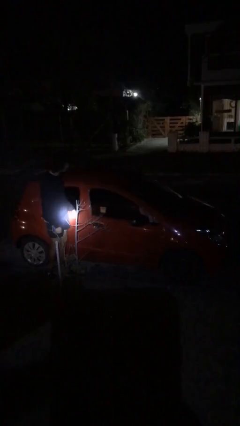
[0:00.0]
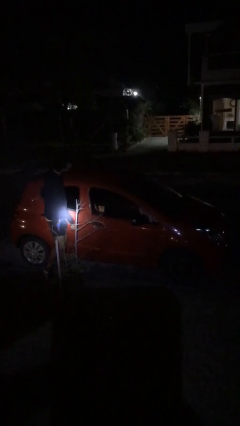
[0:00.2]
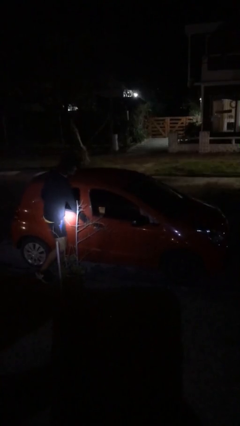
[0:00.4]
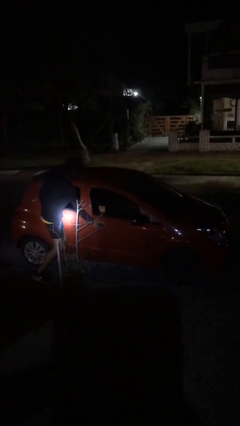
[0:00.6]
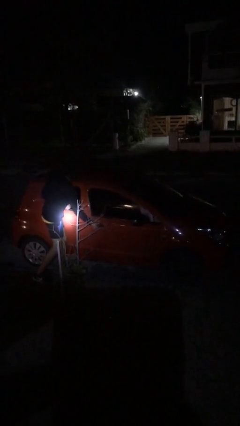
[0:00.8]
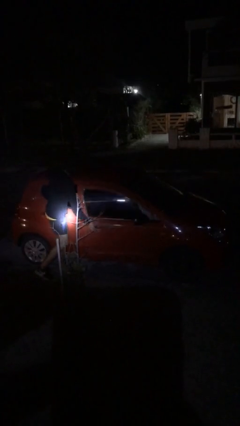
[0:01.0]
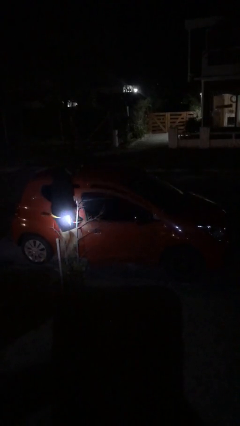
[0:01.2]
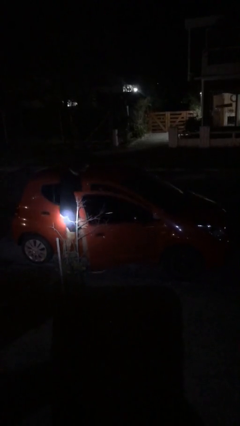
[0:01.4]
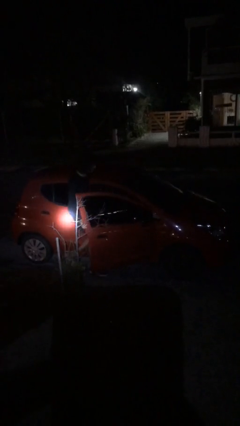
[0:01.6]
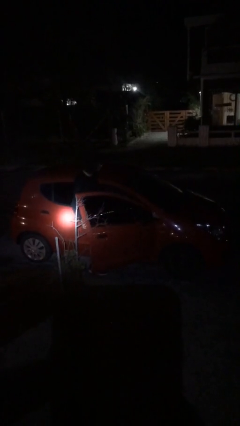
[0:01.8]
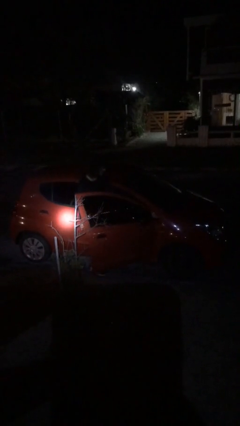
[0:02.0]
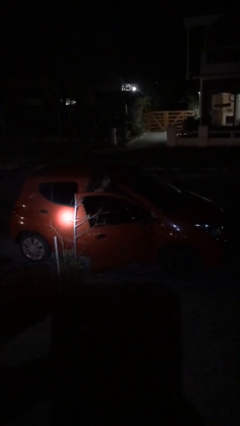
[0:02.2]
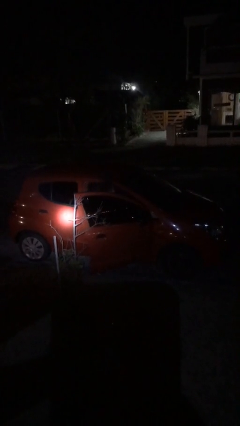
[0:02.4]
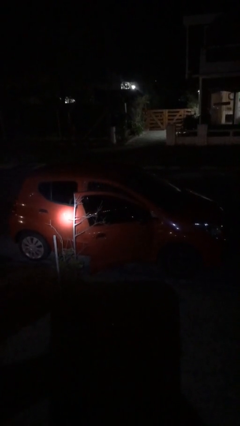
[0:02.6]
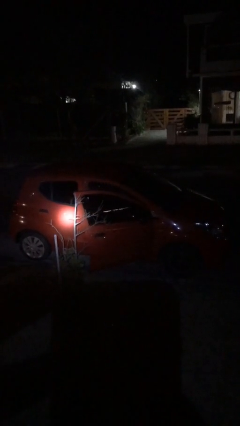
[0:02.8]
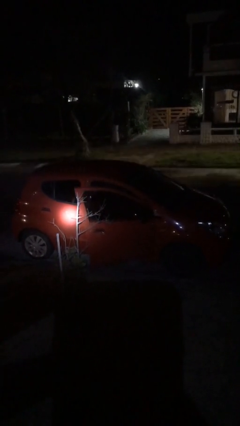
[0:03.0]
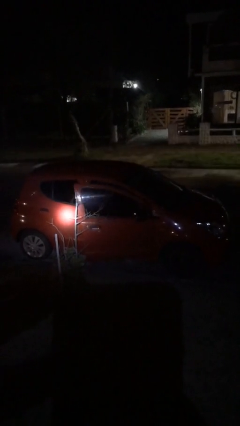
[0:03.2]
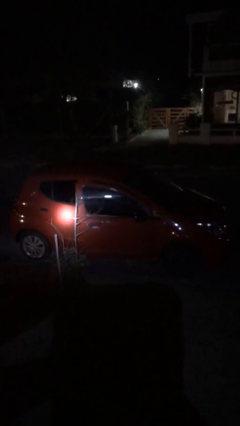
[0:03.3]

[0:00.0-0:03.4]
car picks up person

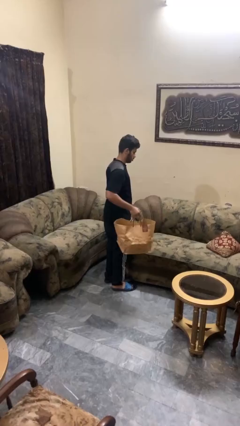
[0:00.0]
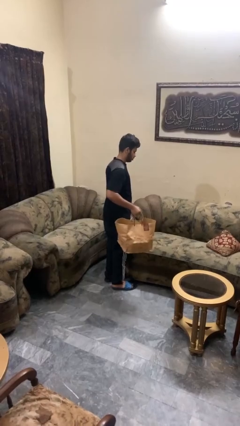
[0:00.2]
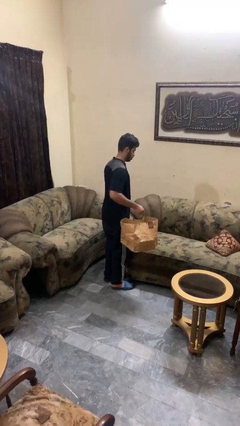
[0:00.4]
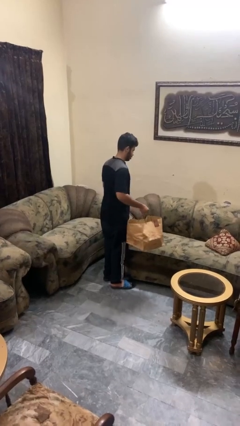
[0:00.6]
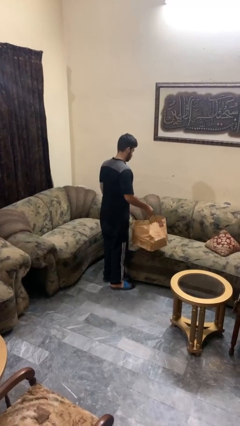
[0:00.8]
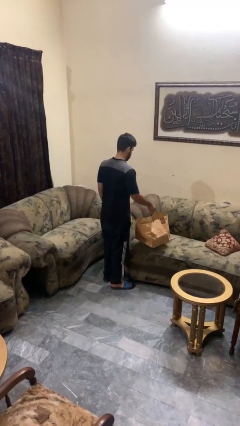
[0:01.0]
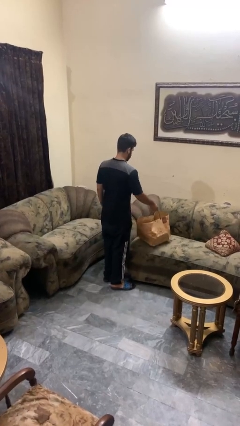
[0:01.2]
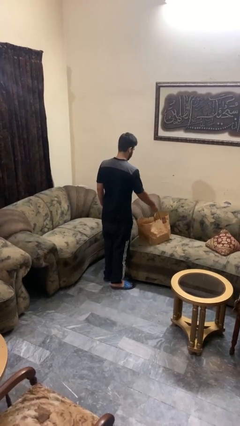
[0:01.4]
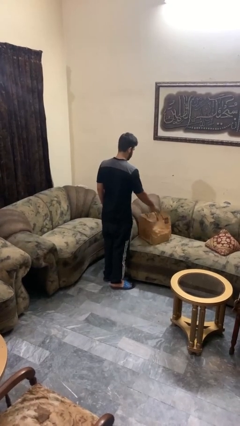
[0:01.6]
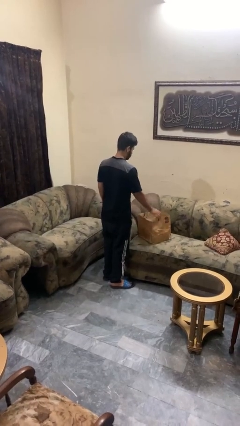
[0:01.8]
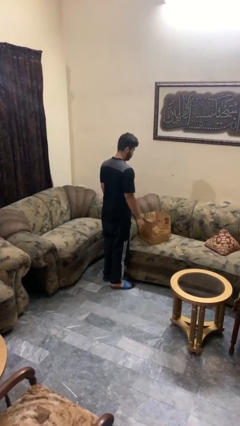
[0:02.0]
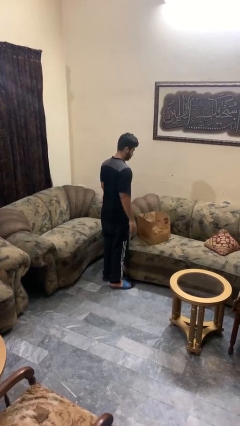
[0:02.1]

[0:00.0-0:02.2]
person puts down object on couch

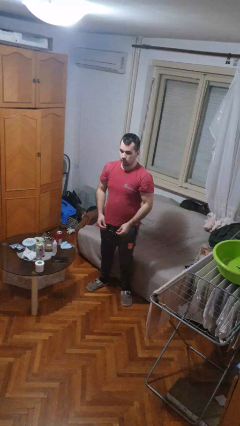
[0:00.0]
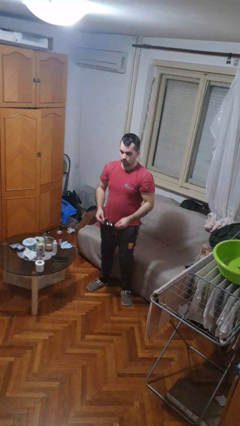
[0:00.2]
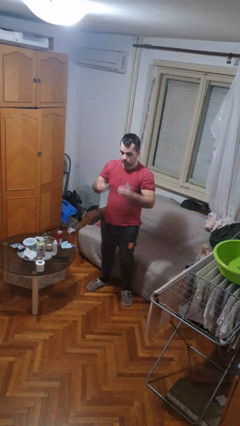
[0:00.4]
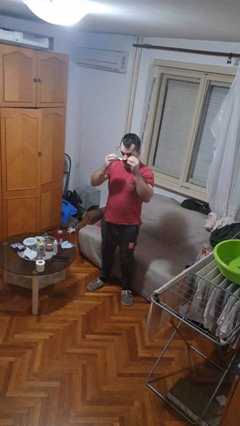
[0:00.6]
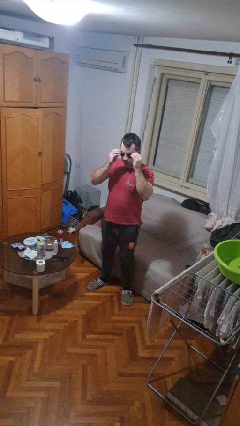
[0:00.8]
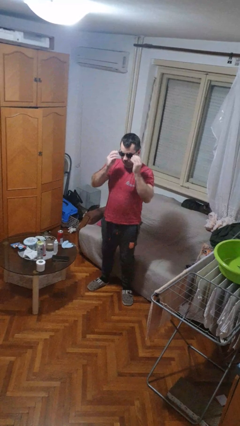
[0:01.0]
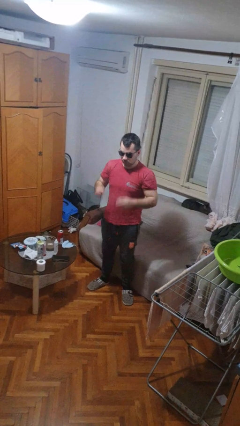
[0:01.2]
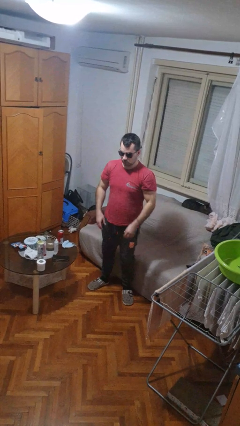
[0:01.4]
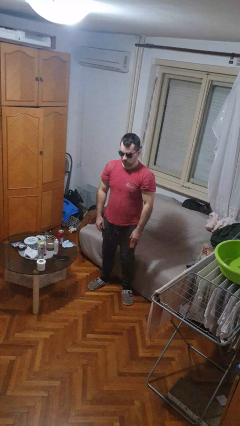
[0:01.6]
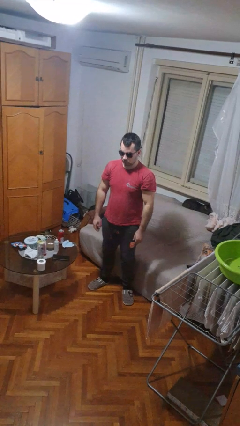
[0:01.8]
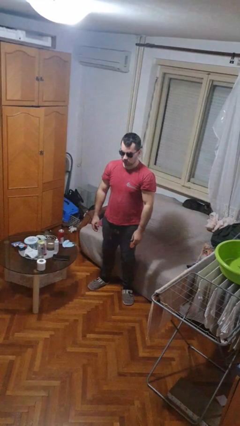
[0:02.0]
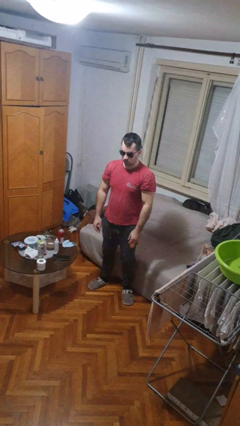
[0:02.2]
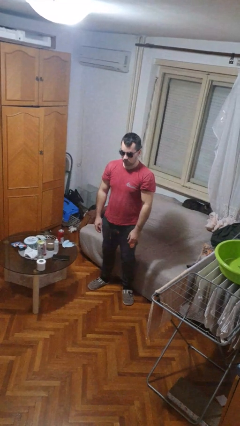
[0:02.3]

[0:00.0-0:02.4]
person puts on sunglasses

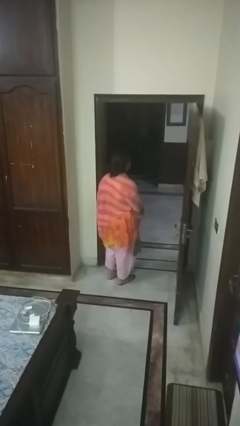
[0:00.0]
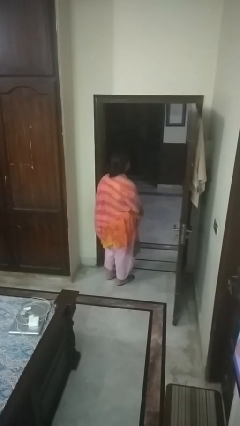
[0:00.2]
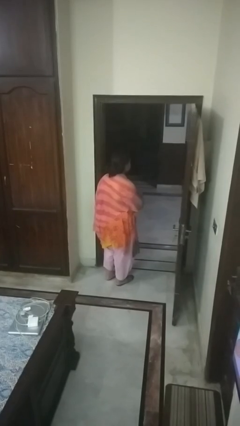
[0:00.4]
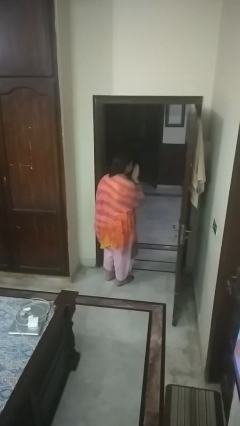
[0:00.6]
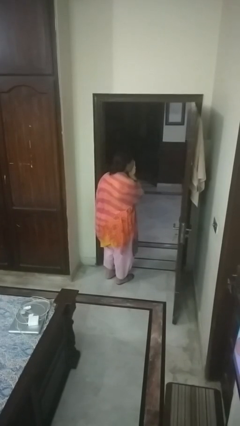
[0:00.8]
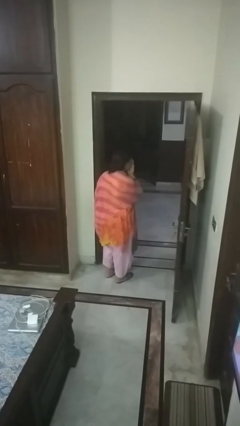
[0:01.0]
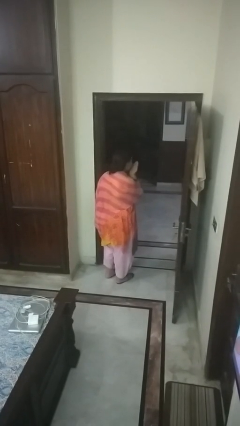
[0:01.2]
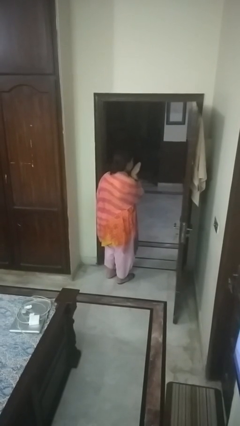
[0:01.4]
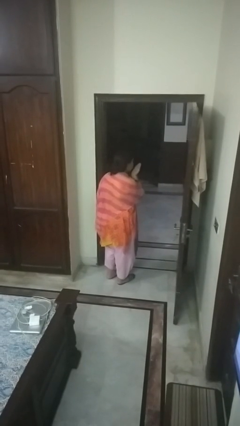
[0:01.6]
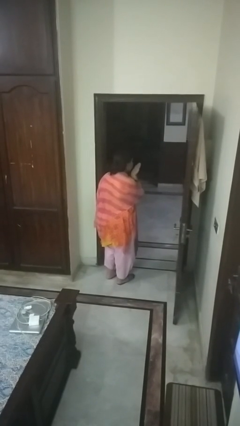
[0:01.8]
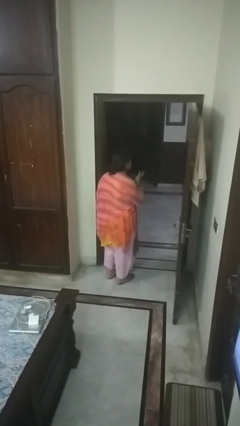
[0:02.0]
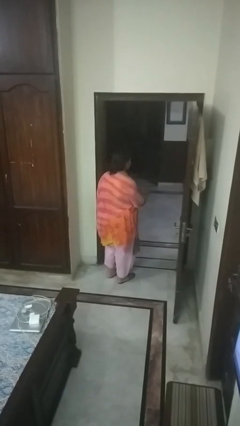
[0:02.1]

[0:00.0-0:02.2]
person gestures blow kiss

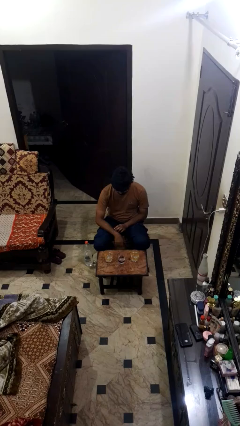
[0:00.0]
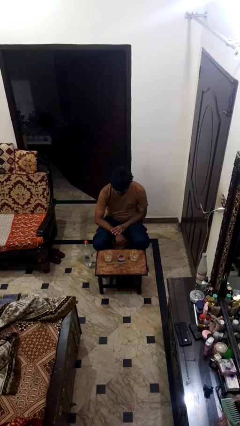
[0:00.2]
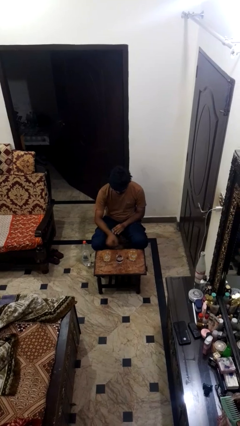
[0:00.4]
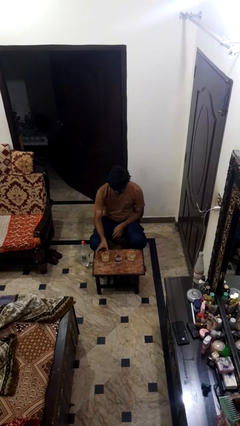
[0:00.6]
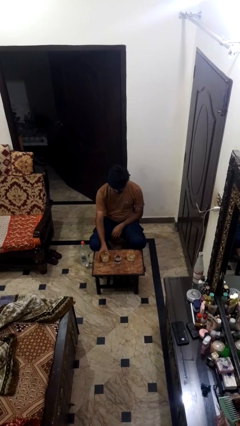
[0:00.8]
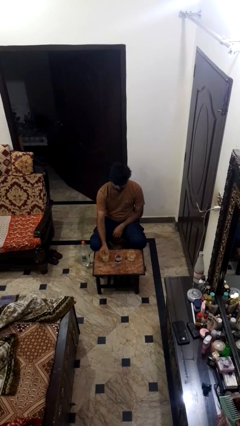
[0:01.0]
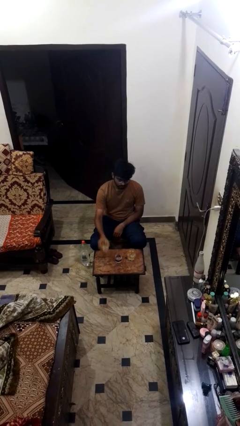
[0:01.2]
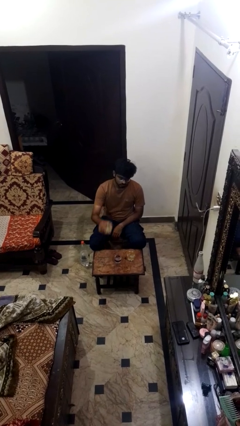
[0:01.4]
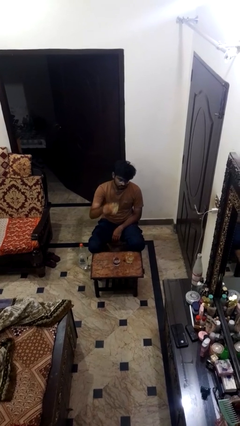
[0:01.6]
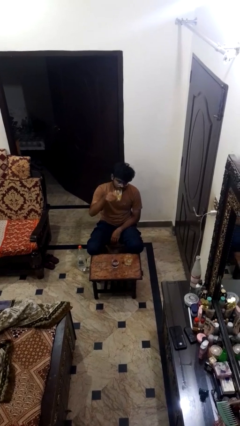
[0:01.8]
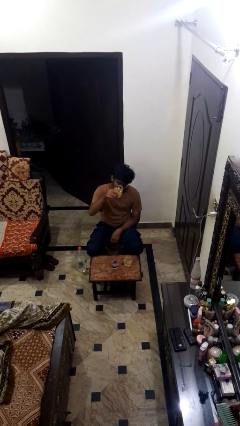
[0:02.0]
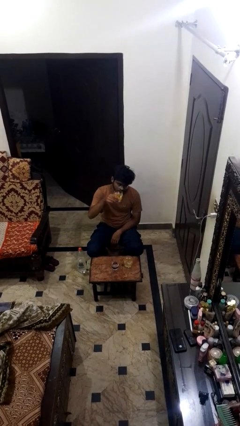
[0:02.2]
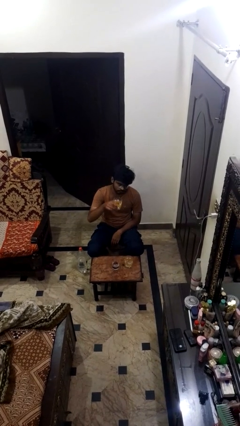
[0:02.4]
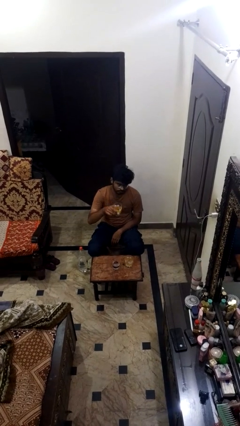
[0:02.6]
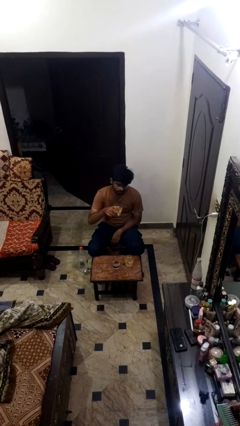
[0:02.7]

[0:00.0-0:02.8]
person picks up object from table

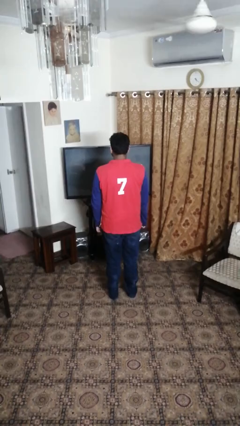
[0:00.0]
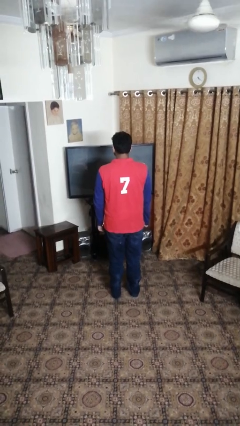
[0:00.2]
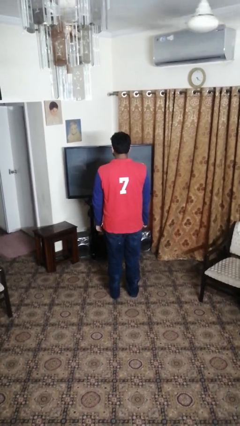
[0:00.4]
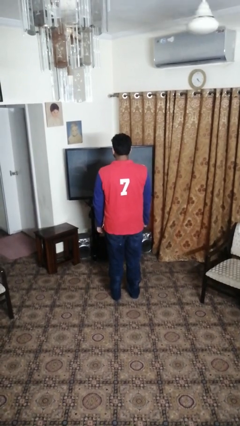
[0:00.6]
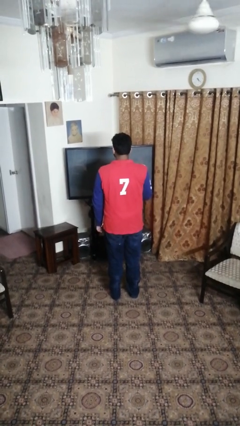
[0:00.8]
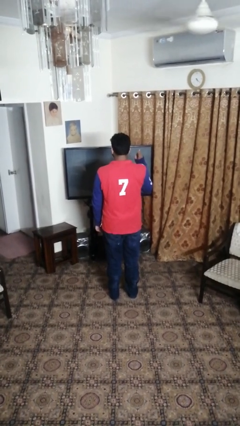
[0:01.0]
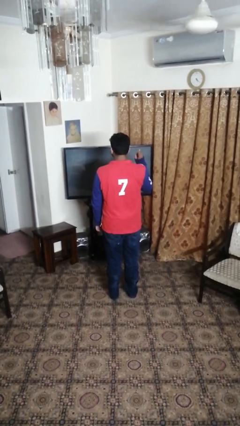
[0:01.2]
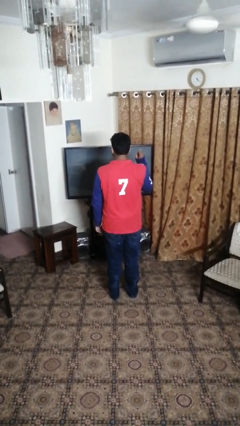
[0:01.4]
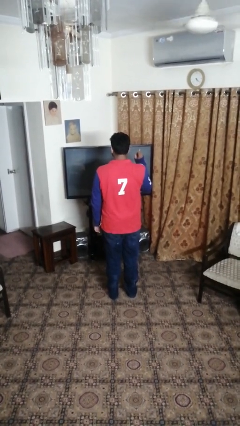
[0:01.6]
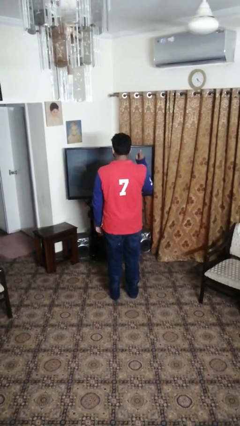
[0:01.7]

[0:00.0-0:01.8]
person gestures number one

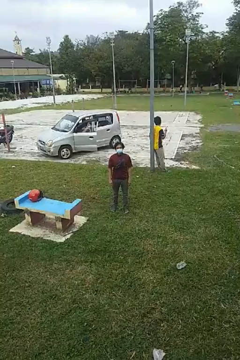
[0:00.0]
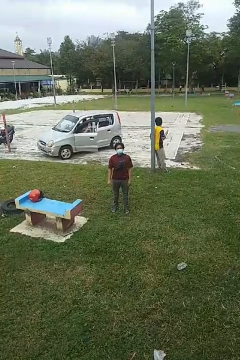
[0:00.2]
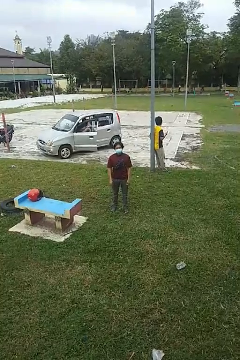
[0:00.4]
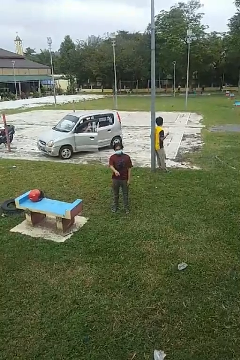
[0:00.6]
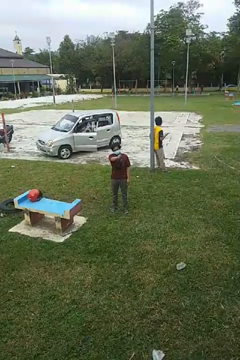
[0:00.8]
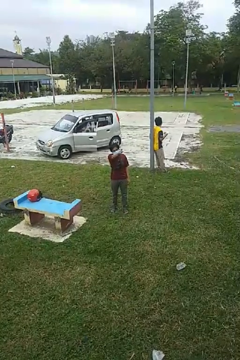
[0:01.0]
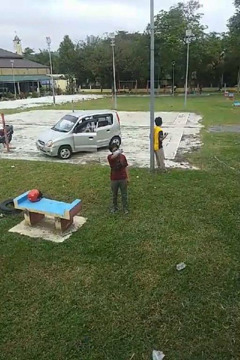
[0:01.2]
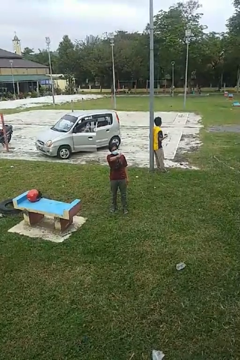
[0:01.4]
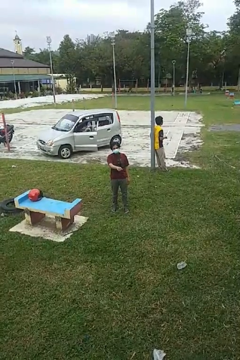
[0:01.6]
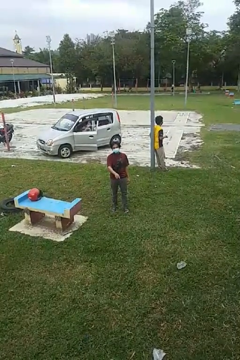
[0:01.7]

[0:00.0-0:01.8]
person points at person

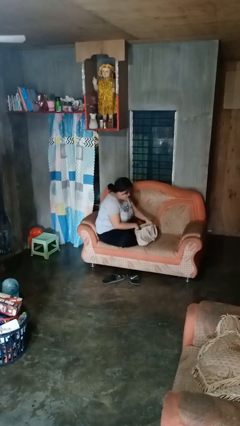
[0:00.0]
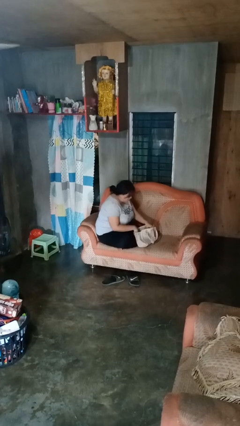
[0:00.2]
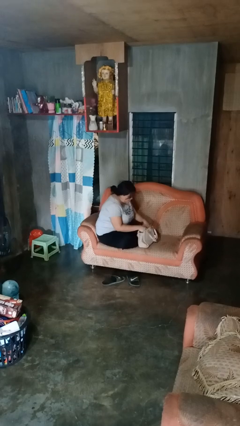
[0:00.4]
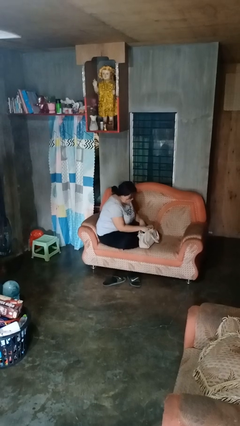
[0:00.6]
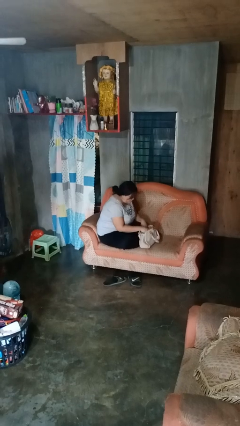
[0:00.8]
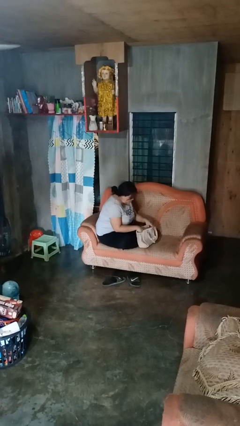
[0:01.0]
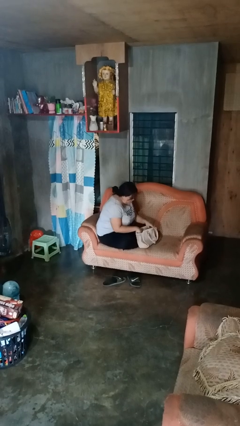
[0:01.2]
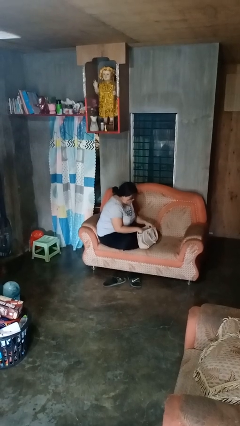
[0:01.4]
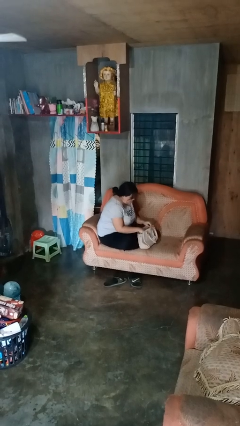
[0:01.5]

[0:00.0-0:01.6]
person searches in purse
